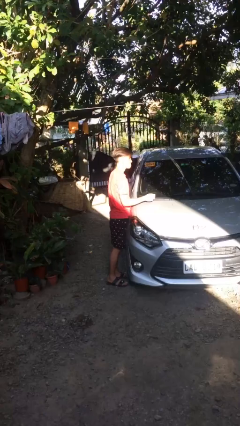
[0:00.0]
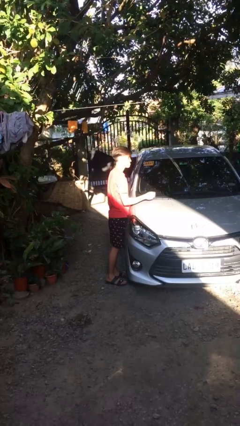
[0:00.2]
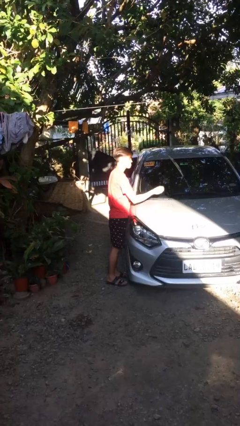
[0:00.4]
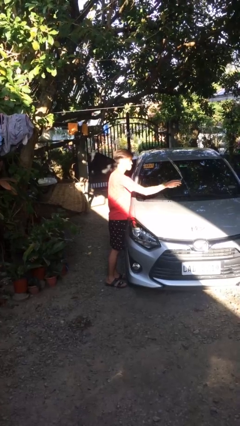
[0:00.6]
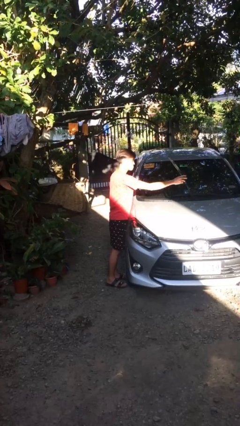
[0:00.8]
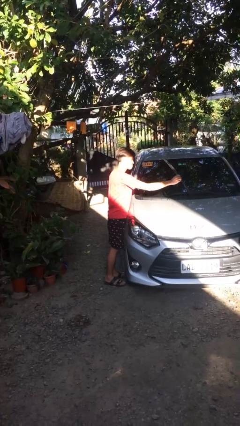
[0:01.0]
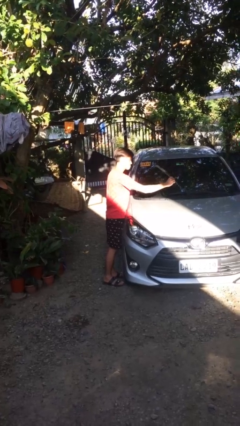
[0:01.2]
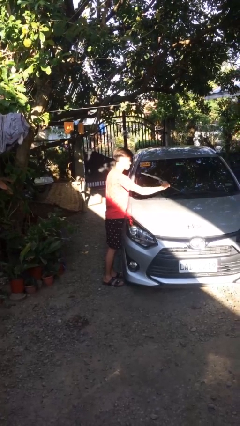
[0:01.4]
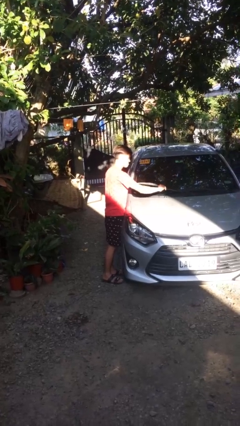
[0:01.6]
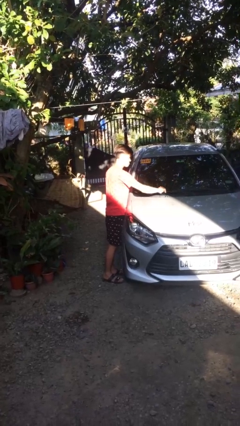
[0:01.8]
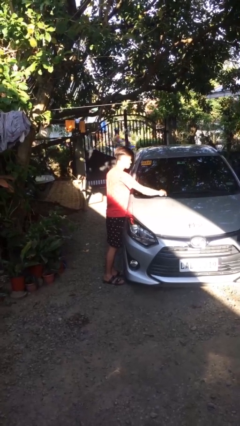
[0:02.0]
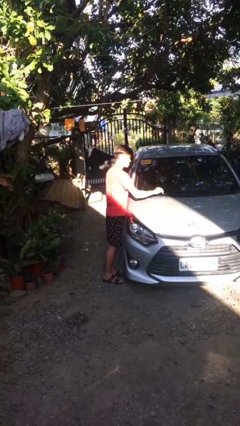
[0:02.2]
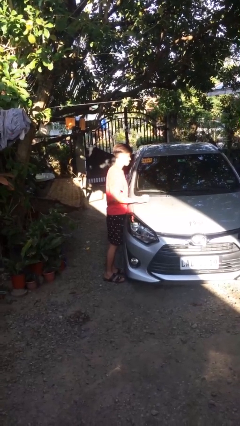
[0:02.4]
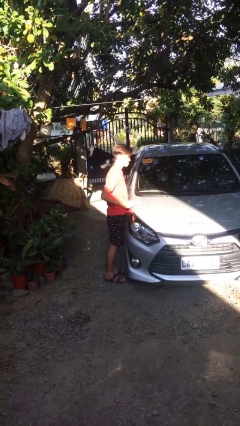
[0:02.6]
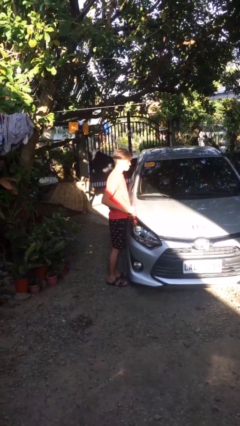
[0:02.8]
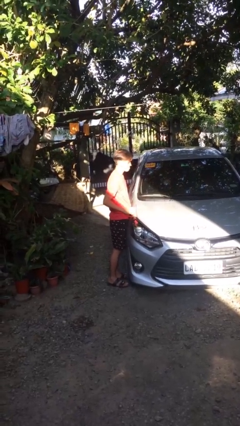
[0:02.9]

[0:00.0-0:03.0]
person flips down car wipers

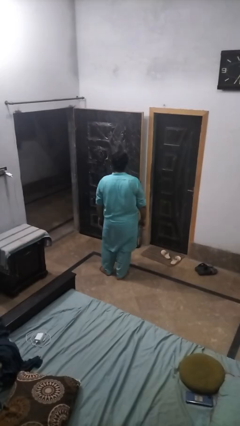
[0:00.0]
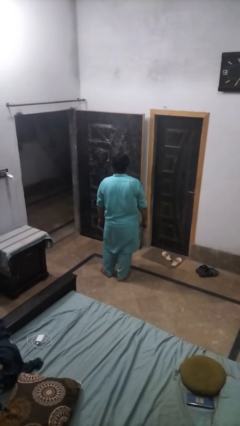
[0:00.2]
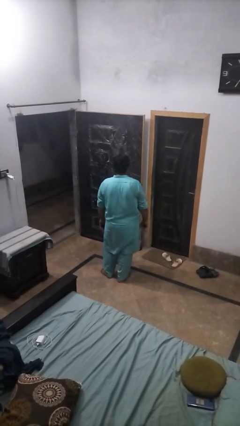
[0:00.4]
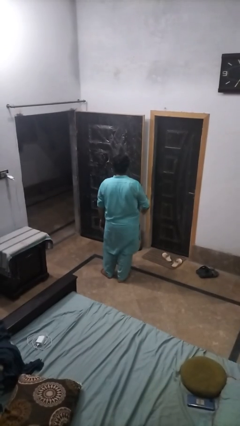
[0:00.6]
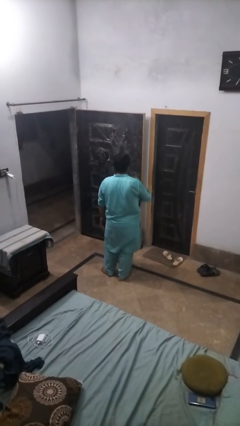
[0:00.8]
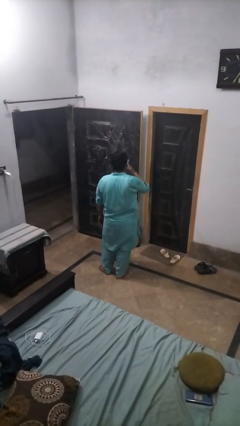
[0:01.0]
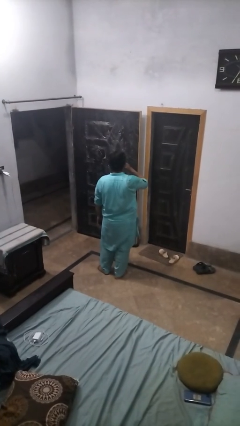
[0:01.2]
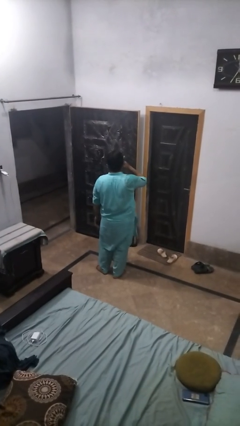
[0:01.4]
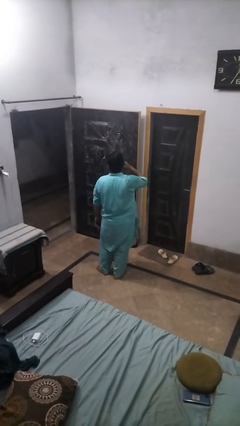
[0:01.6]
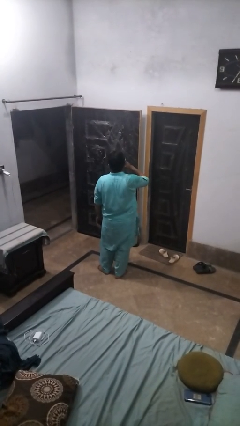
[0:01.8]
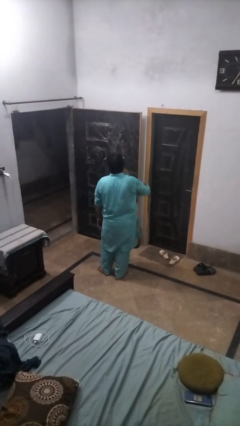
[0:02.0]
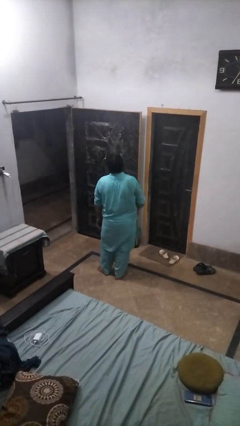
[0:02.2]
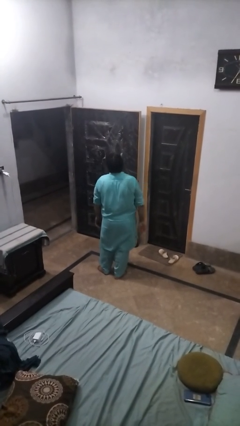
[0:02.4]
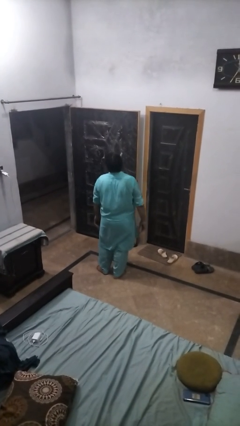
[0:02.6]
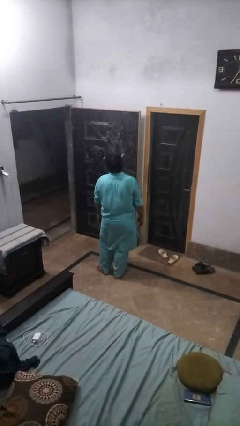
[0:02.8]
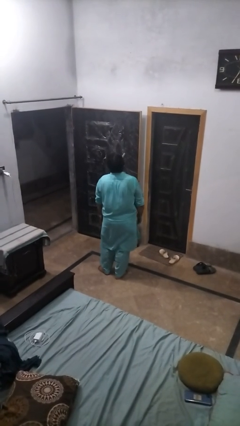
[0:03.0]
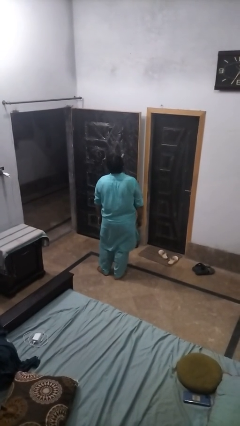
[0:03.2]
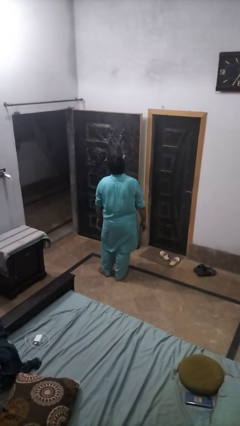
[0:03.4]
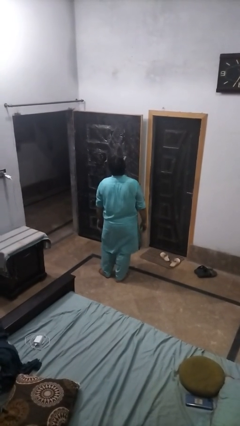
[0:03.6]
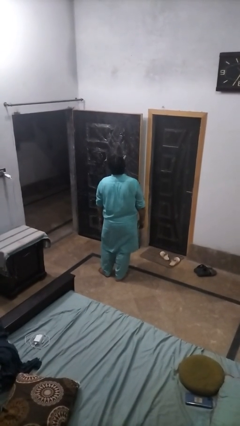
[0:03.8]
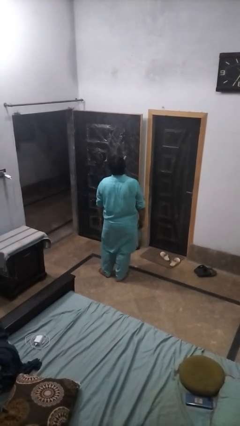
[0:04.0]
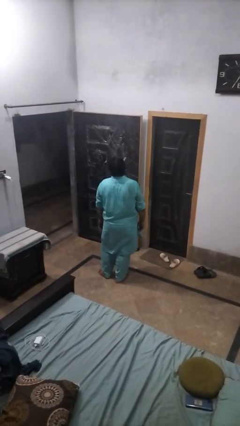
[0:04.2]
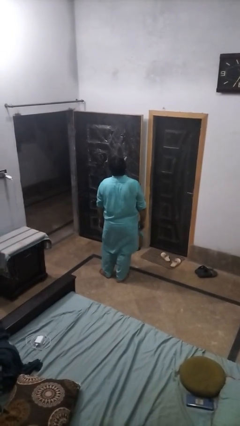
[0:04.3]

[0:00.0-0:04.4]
person vapes

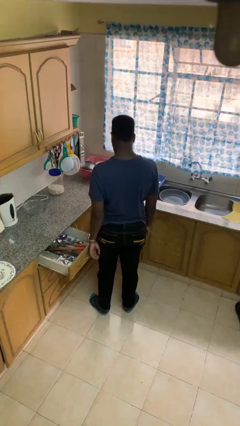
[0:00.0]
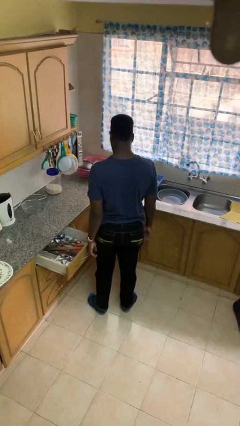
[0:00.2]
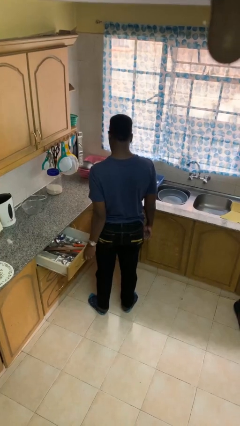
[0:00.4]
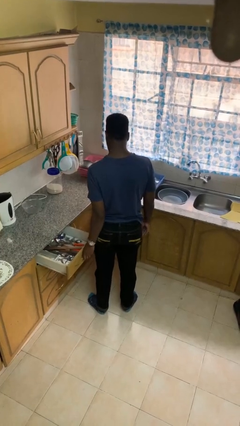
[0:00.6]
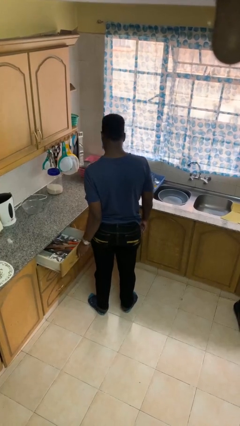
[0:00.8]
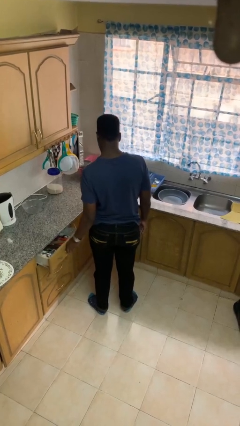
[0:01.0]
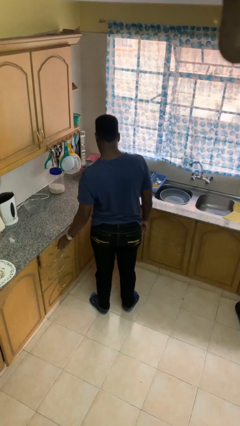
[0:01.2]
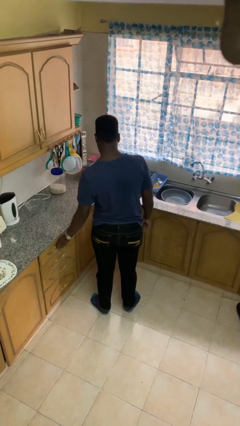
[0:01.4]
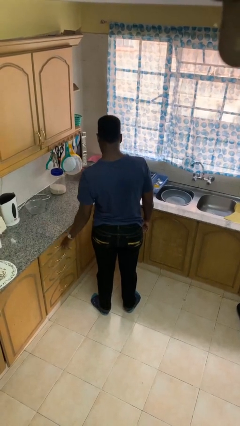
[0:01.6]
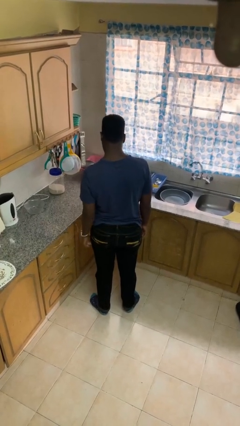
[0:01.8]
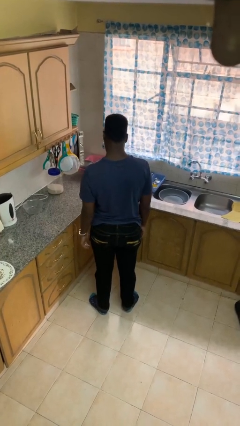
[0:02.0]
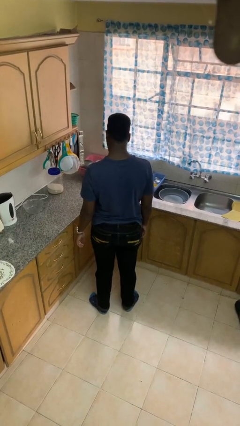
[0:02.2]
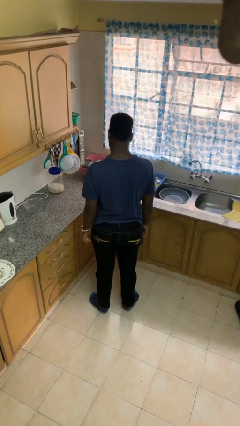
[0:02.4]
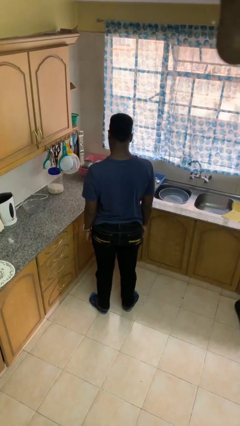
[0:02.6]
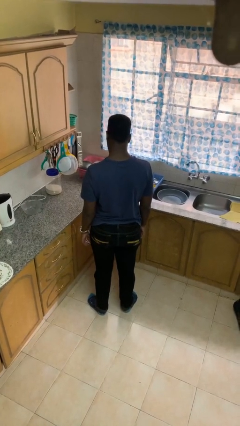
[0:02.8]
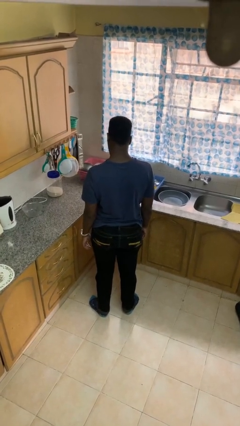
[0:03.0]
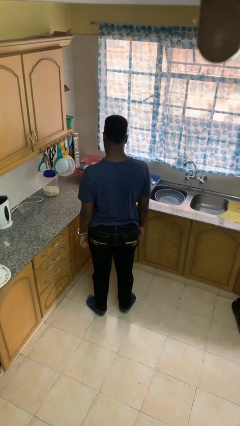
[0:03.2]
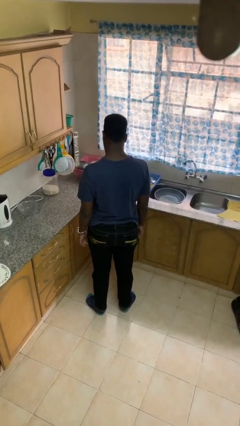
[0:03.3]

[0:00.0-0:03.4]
person closes kitchen drawer

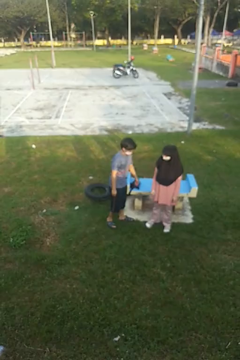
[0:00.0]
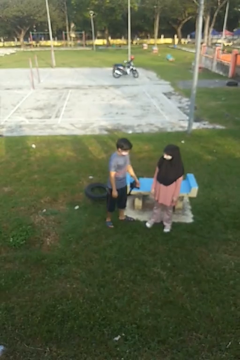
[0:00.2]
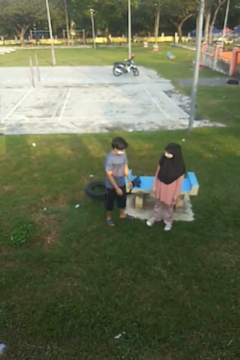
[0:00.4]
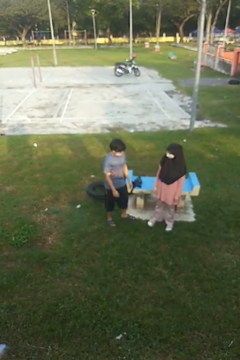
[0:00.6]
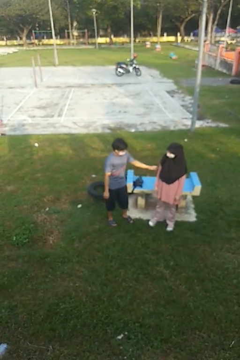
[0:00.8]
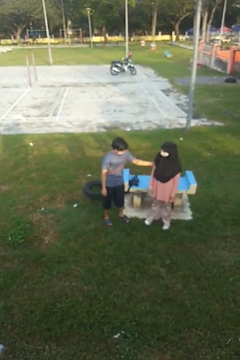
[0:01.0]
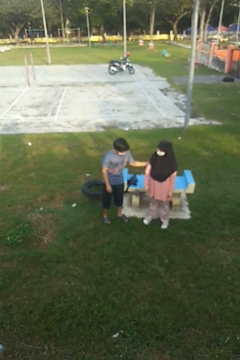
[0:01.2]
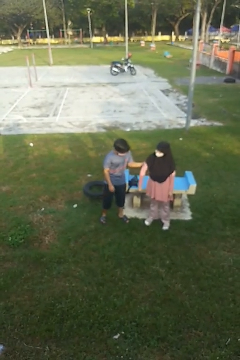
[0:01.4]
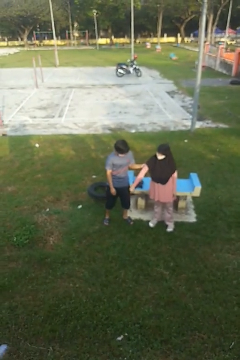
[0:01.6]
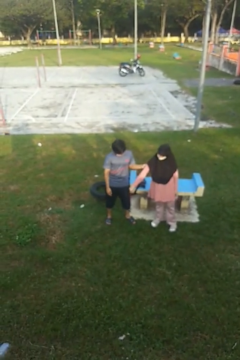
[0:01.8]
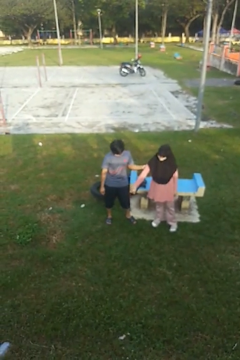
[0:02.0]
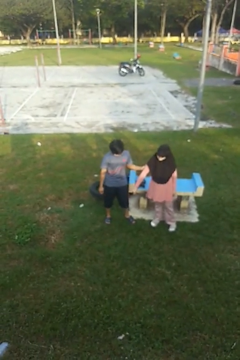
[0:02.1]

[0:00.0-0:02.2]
person grabs person by bicep

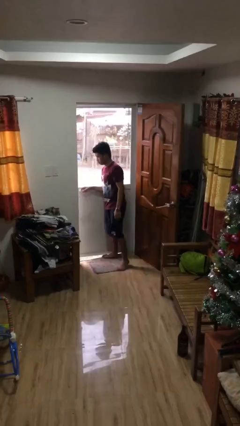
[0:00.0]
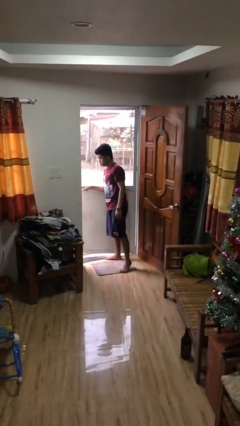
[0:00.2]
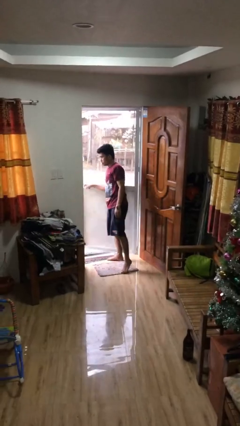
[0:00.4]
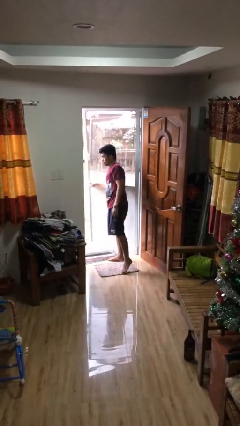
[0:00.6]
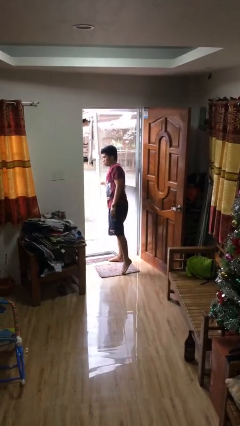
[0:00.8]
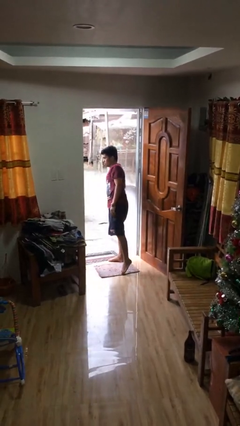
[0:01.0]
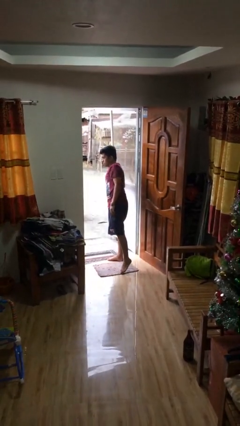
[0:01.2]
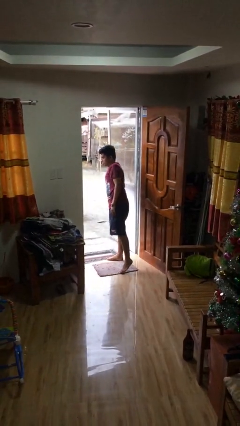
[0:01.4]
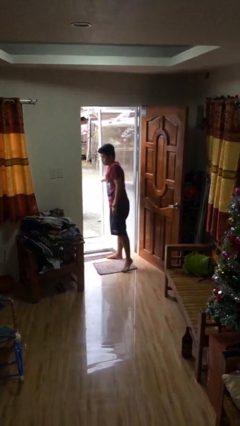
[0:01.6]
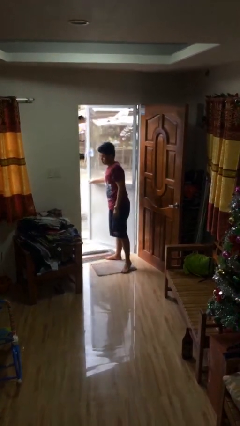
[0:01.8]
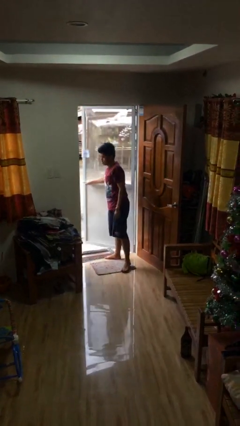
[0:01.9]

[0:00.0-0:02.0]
person opens facility door

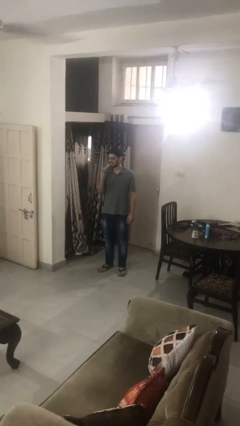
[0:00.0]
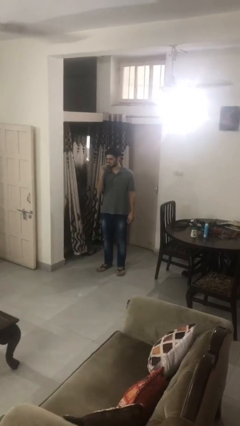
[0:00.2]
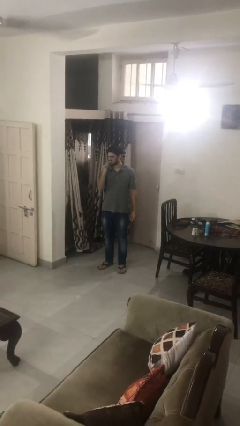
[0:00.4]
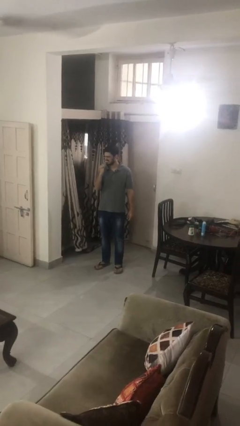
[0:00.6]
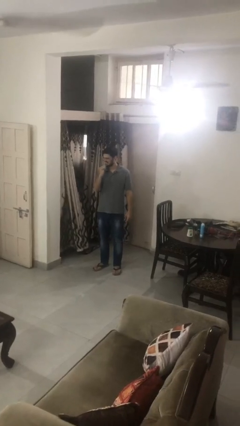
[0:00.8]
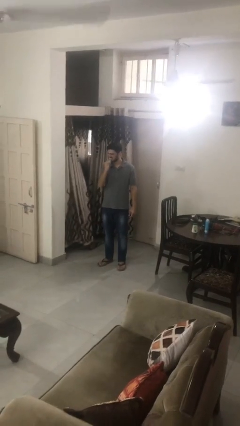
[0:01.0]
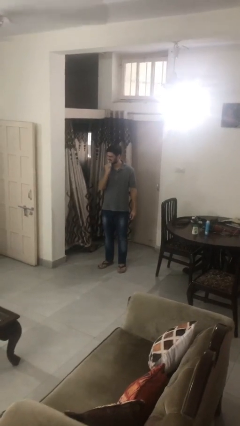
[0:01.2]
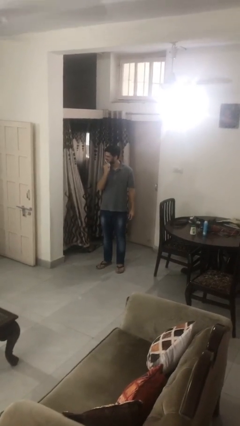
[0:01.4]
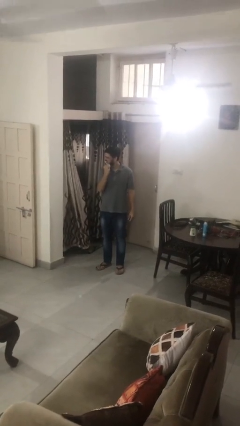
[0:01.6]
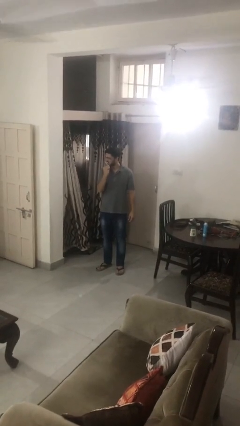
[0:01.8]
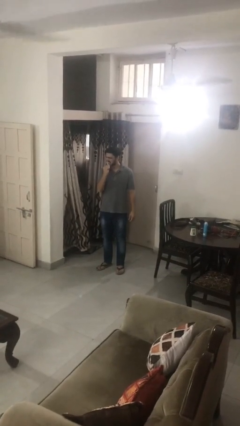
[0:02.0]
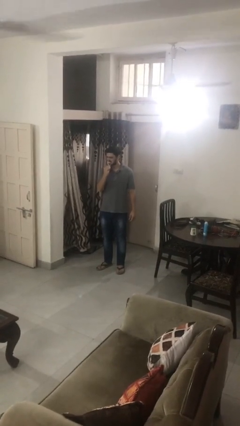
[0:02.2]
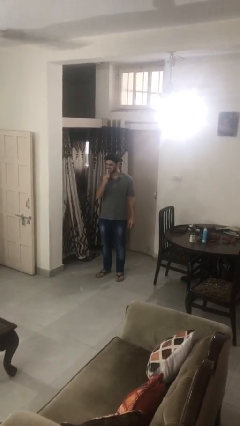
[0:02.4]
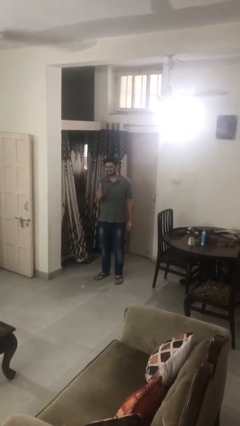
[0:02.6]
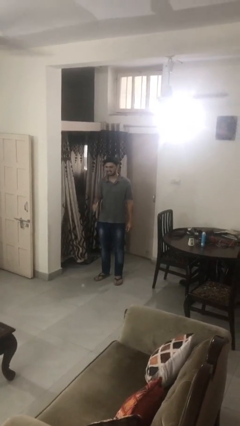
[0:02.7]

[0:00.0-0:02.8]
person brushes teeth
